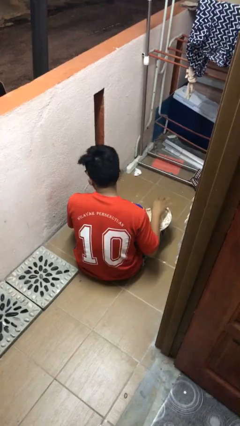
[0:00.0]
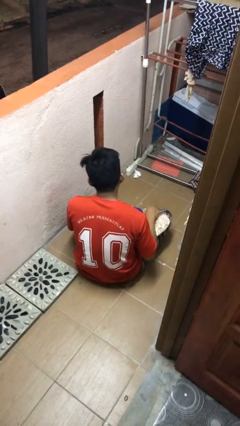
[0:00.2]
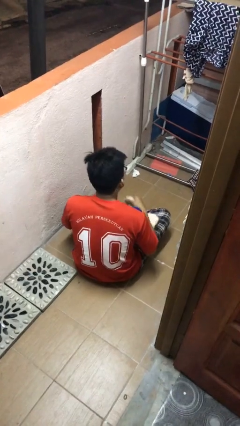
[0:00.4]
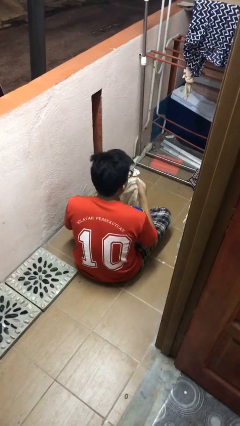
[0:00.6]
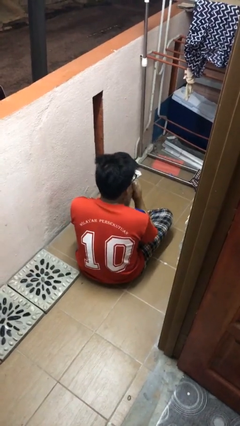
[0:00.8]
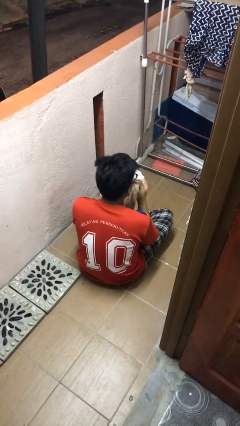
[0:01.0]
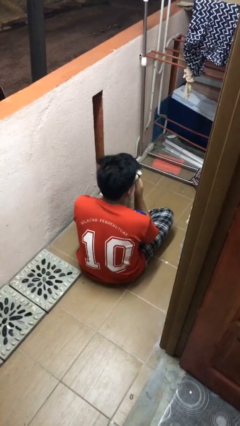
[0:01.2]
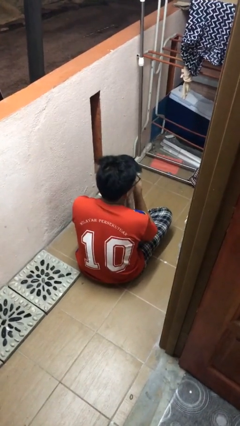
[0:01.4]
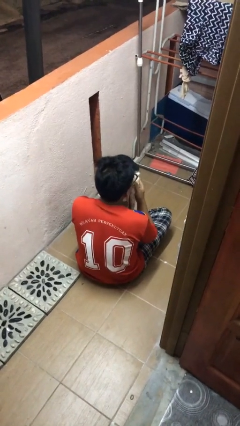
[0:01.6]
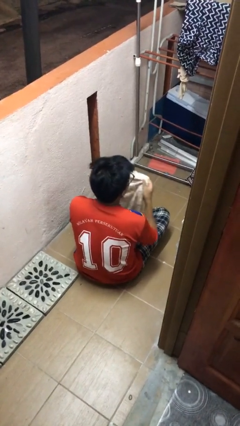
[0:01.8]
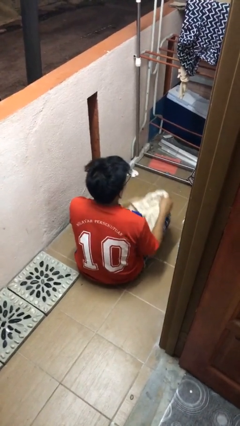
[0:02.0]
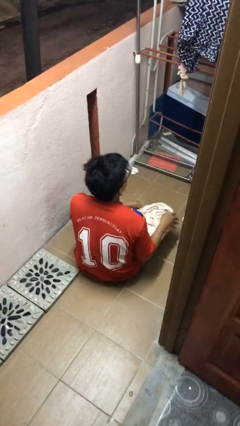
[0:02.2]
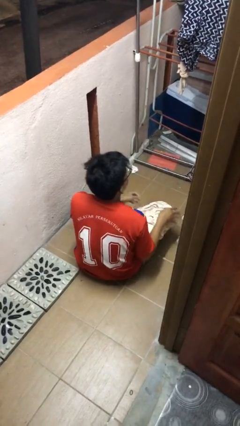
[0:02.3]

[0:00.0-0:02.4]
person wipes mouth with napkin

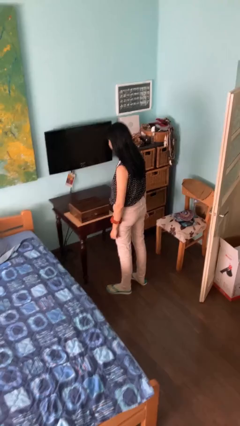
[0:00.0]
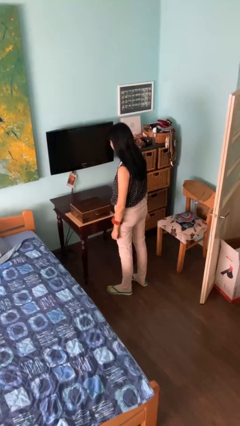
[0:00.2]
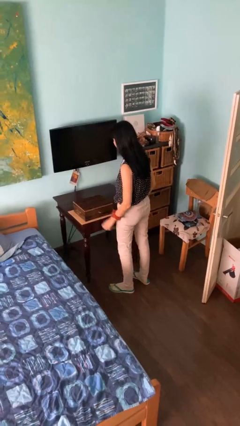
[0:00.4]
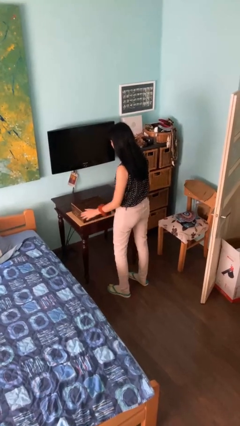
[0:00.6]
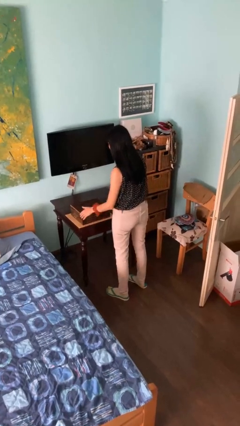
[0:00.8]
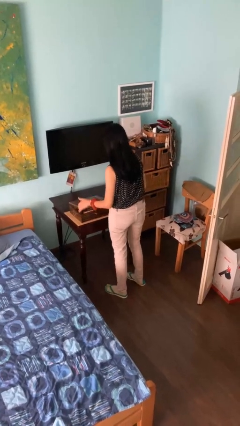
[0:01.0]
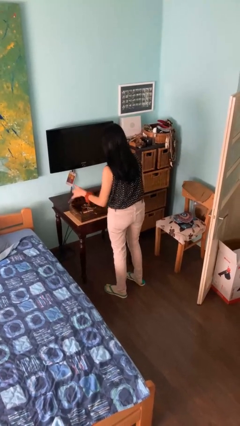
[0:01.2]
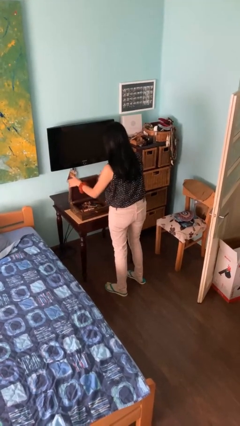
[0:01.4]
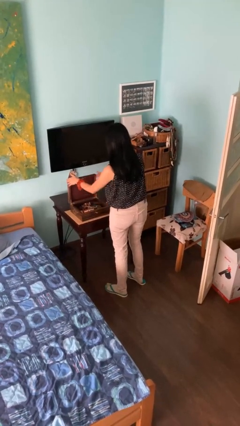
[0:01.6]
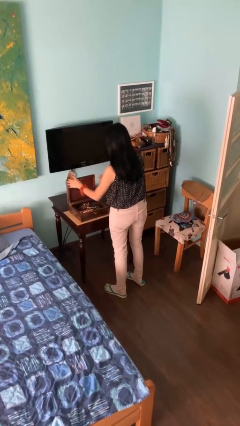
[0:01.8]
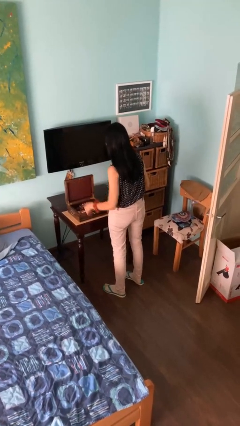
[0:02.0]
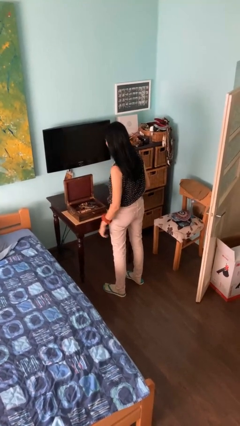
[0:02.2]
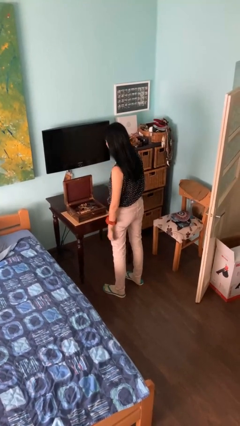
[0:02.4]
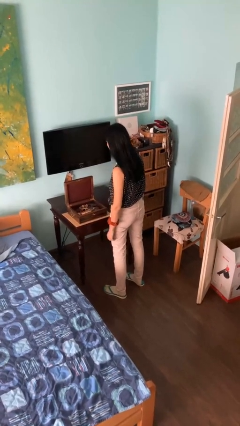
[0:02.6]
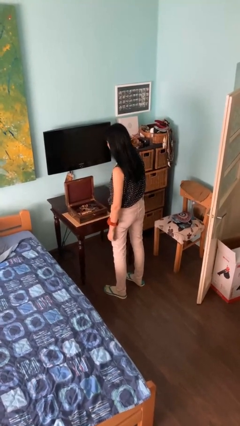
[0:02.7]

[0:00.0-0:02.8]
person opens jewelry box

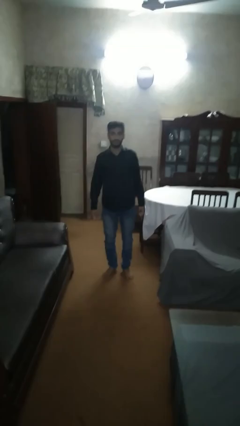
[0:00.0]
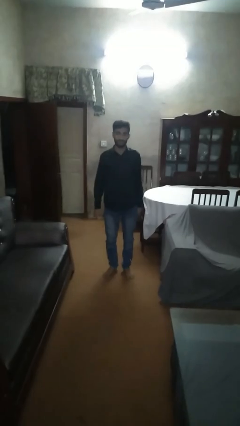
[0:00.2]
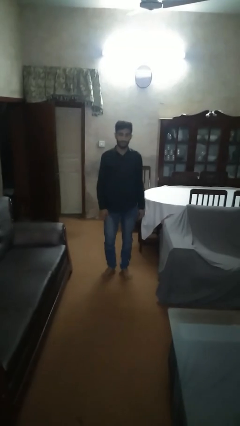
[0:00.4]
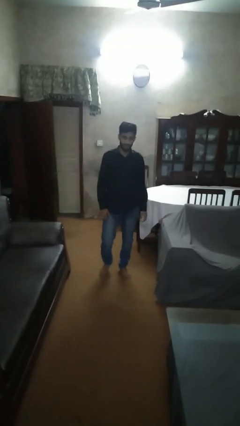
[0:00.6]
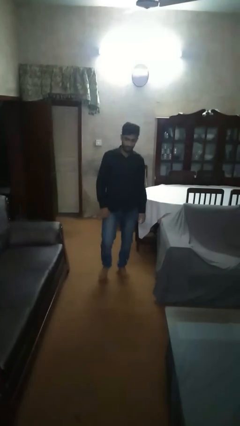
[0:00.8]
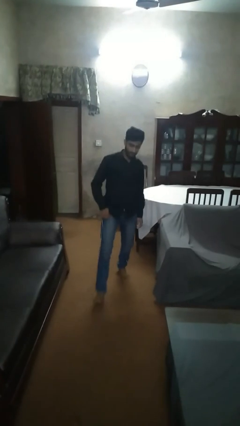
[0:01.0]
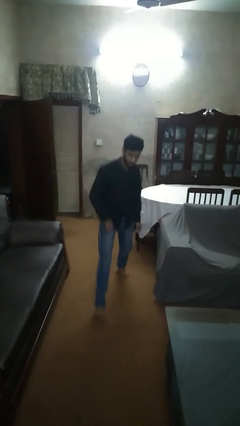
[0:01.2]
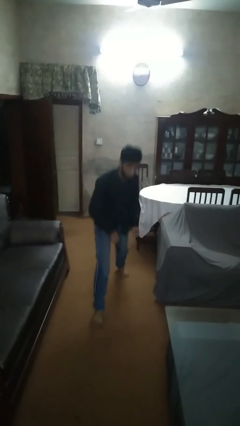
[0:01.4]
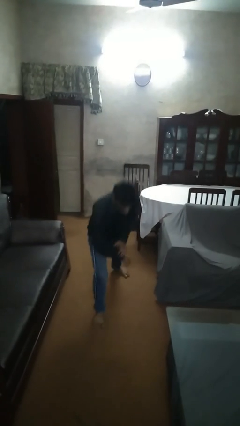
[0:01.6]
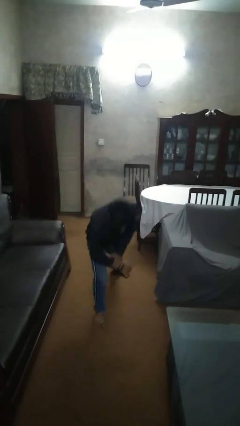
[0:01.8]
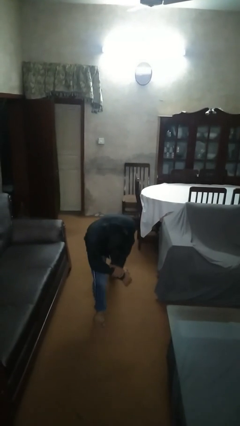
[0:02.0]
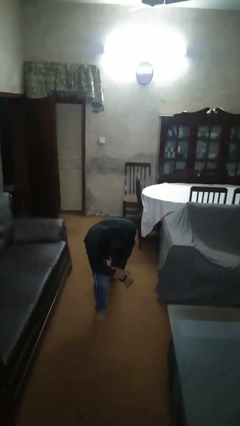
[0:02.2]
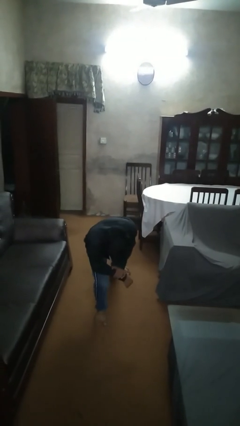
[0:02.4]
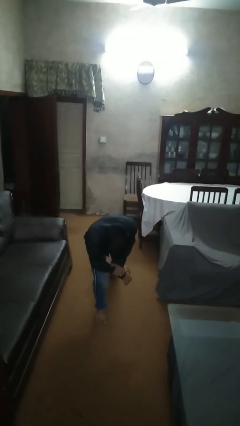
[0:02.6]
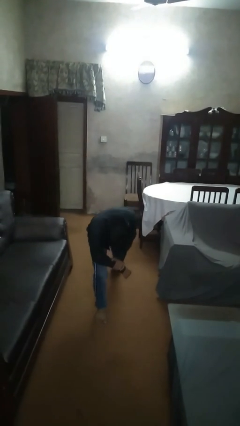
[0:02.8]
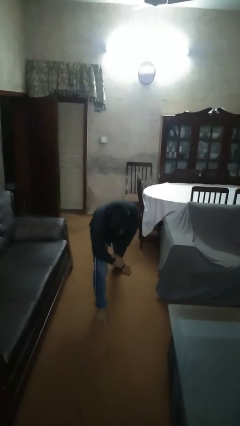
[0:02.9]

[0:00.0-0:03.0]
person exercises with lunges

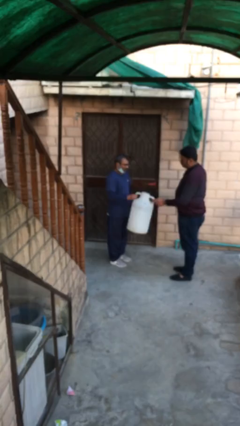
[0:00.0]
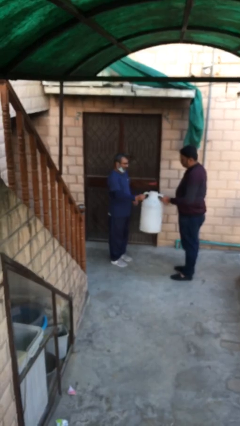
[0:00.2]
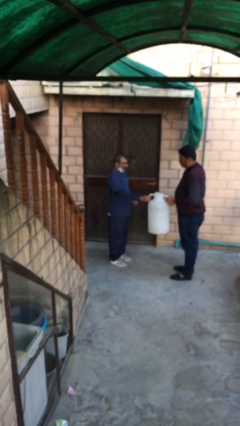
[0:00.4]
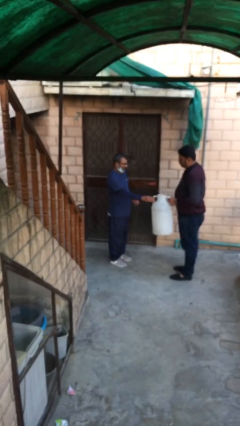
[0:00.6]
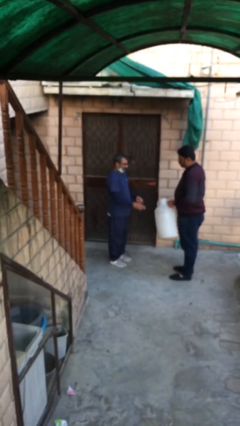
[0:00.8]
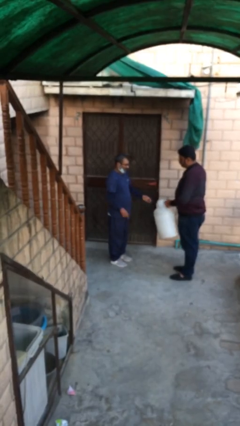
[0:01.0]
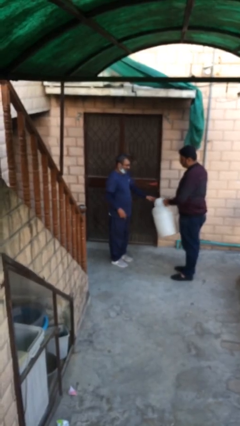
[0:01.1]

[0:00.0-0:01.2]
person transfers object to person

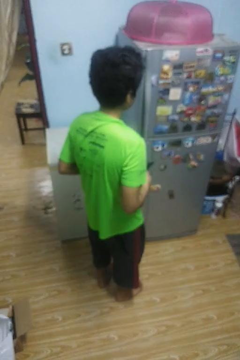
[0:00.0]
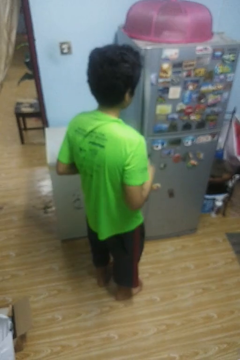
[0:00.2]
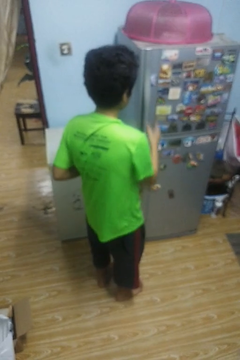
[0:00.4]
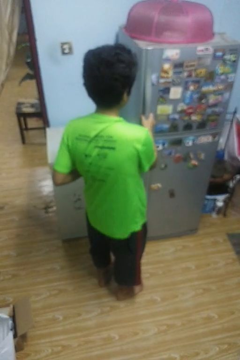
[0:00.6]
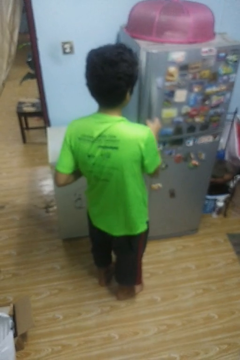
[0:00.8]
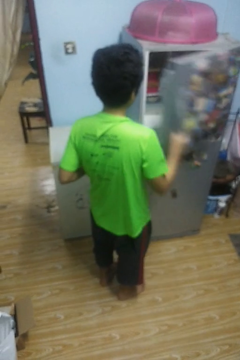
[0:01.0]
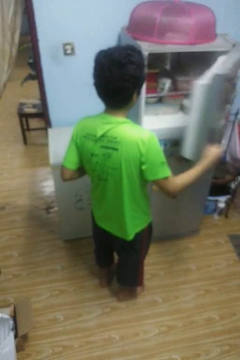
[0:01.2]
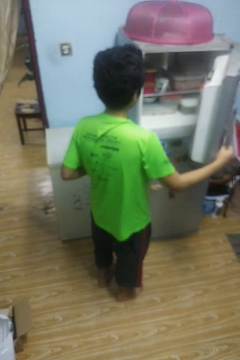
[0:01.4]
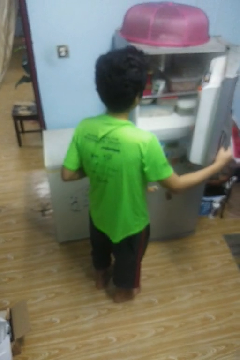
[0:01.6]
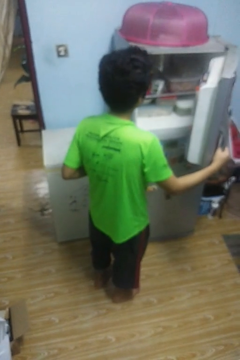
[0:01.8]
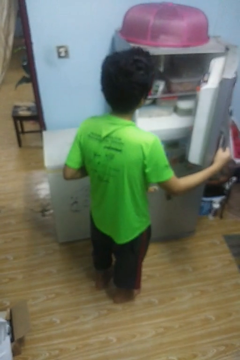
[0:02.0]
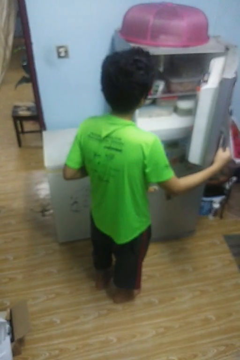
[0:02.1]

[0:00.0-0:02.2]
person opens refrigerator

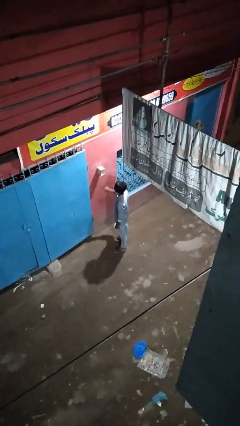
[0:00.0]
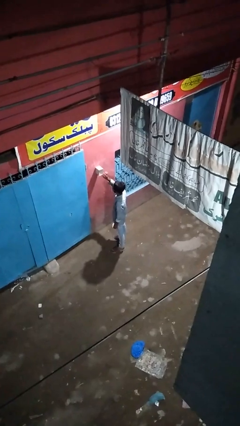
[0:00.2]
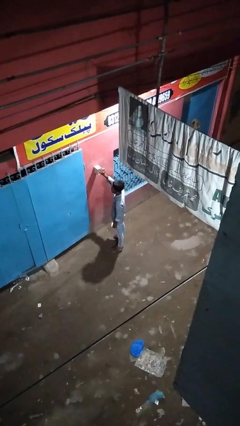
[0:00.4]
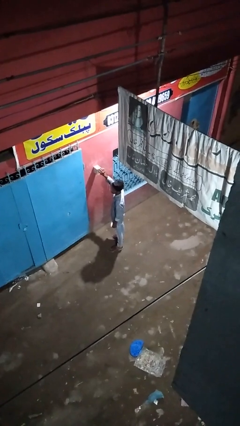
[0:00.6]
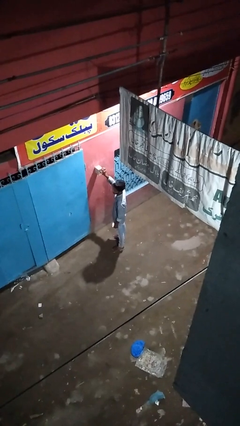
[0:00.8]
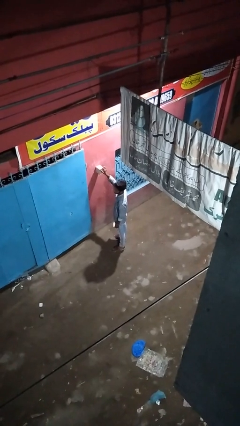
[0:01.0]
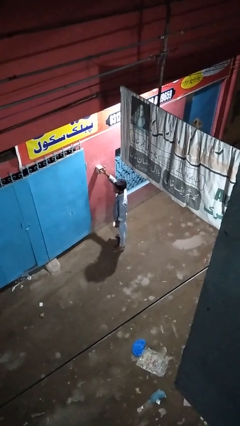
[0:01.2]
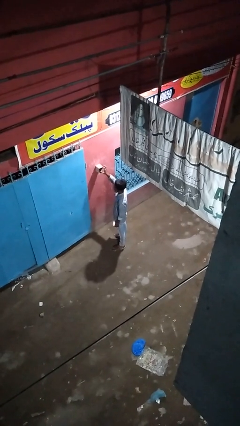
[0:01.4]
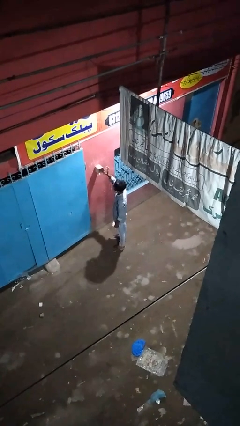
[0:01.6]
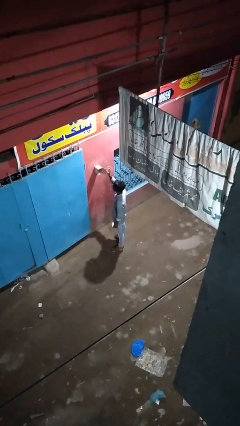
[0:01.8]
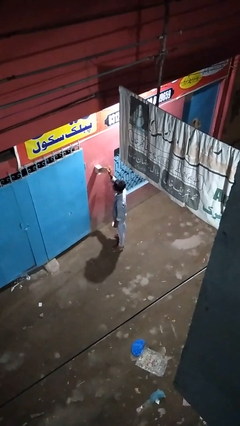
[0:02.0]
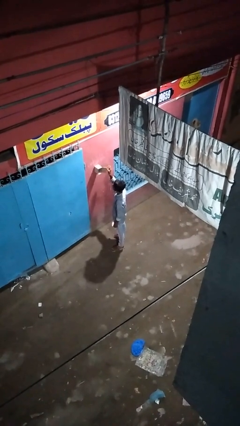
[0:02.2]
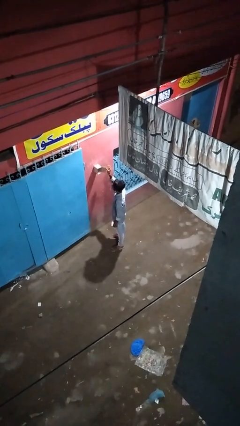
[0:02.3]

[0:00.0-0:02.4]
person opens mailbox

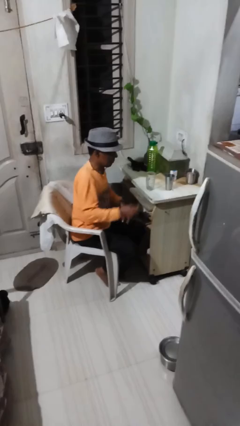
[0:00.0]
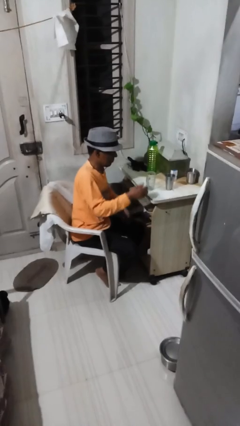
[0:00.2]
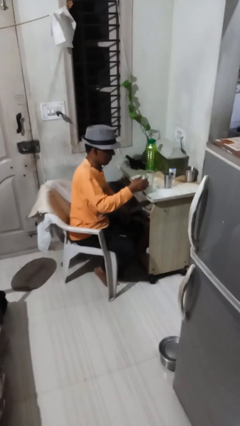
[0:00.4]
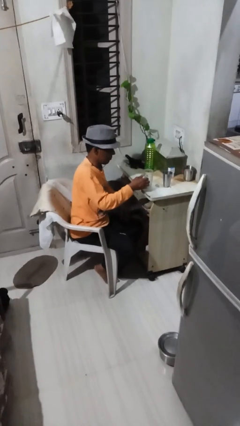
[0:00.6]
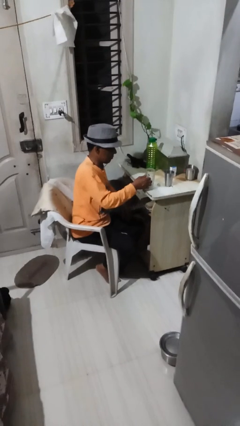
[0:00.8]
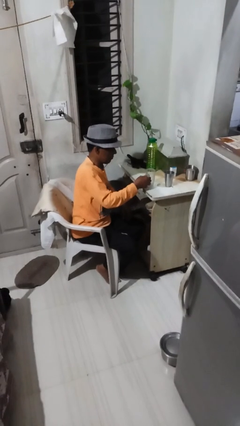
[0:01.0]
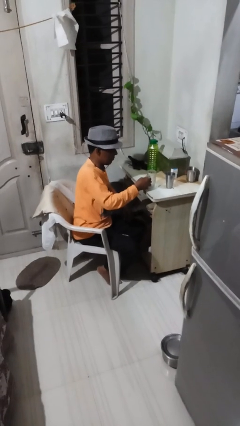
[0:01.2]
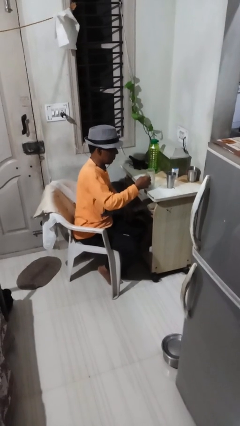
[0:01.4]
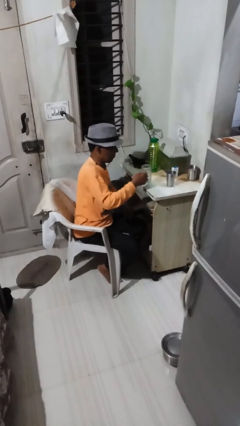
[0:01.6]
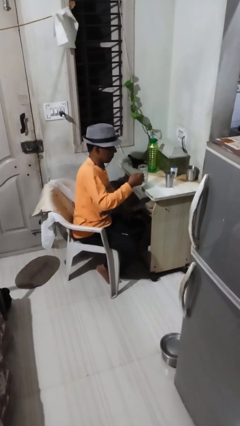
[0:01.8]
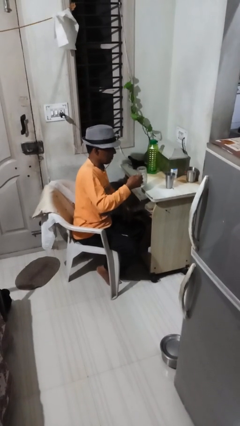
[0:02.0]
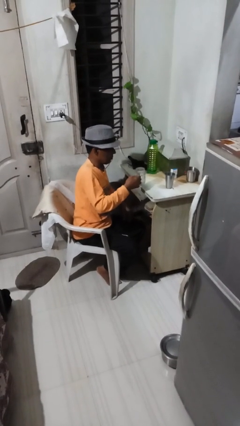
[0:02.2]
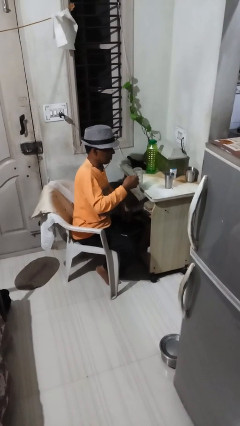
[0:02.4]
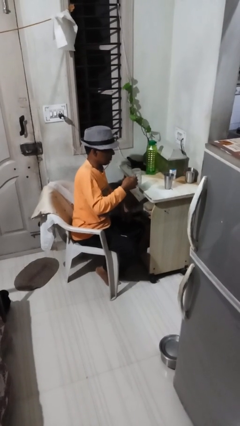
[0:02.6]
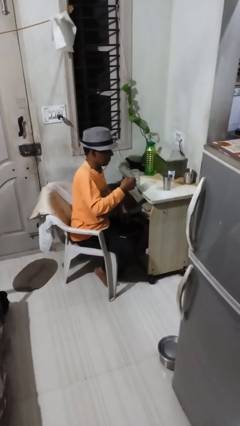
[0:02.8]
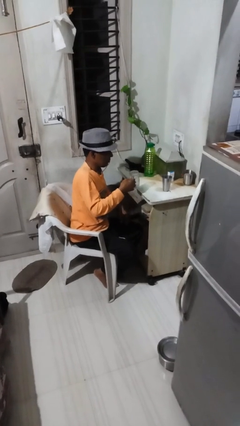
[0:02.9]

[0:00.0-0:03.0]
person picks up object from table

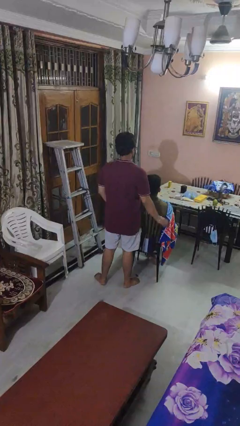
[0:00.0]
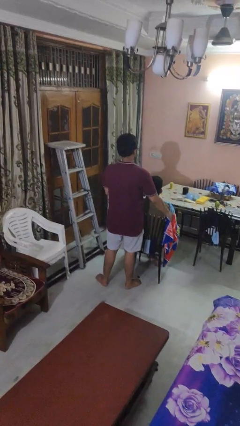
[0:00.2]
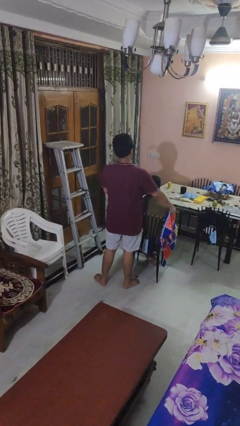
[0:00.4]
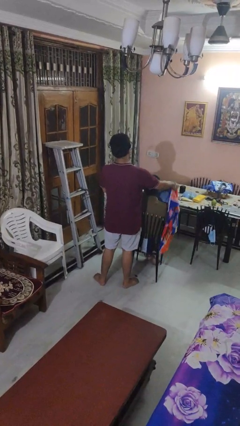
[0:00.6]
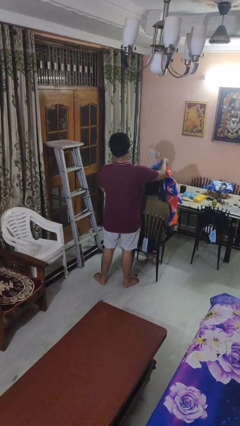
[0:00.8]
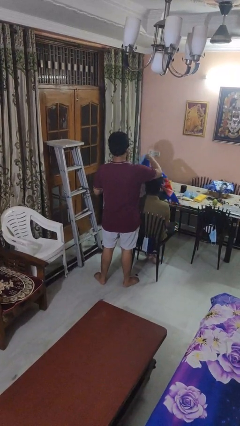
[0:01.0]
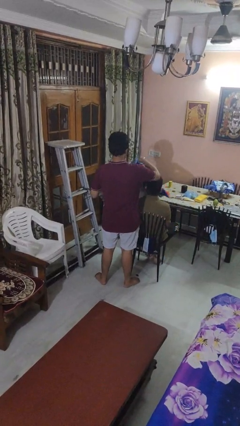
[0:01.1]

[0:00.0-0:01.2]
person uncovers friend with blanket
